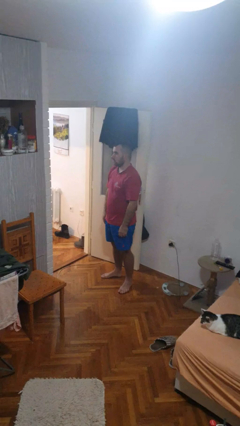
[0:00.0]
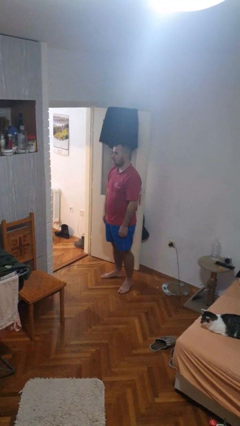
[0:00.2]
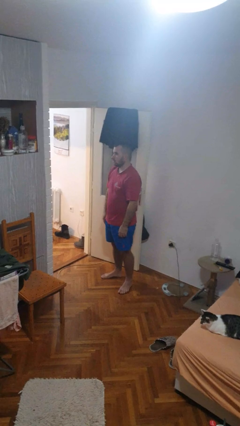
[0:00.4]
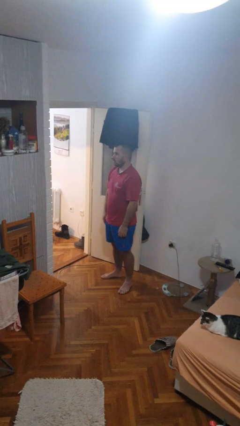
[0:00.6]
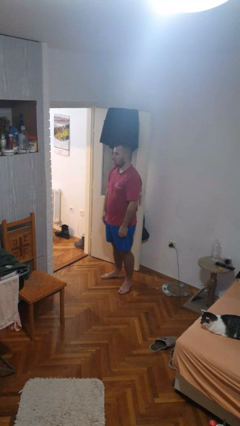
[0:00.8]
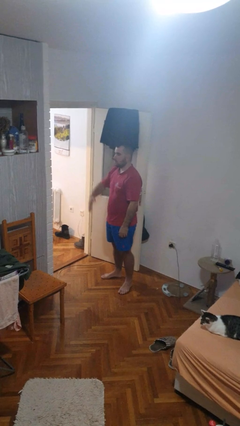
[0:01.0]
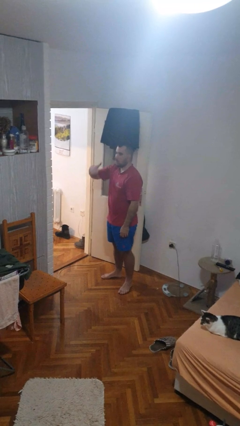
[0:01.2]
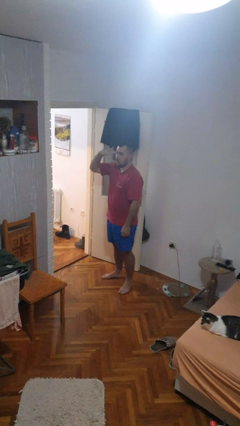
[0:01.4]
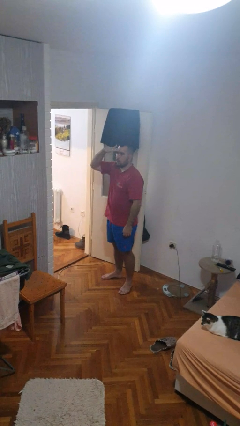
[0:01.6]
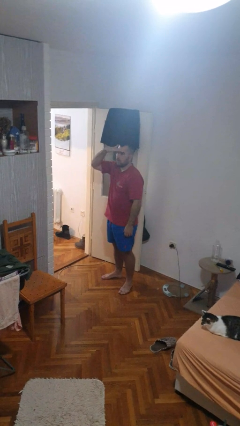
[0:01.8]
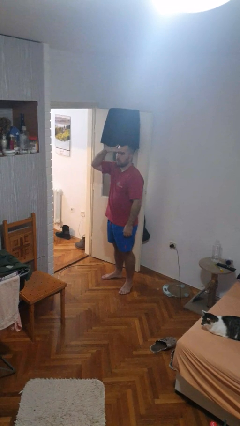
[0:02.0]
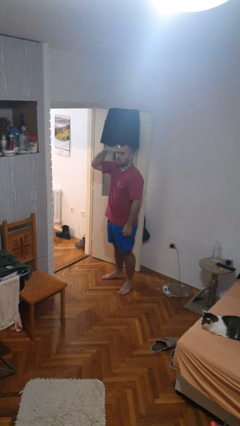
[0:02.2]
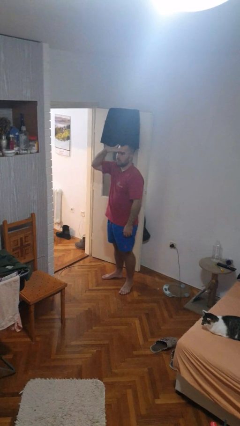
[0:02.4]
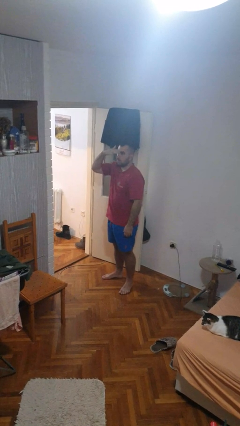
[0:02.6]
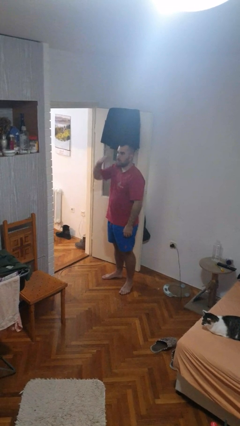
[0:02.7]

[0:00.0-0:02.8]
person shades eyes

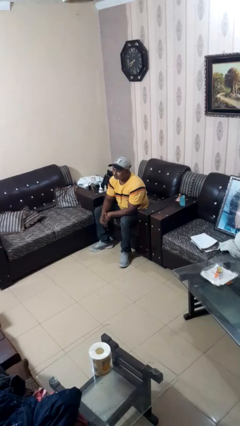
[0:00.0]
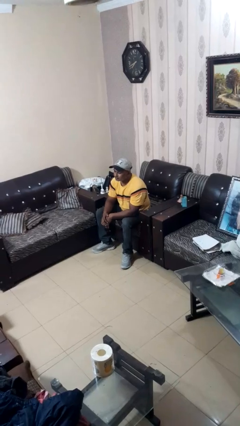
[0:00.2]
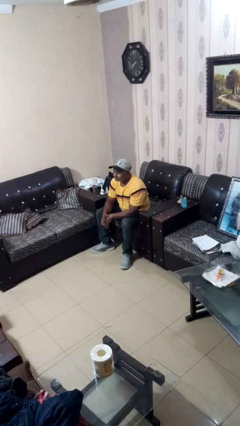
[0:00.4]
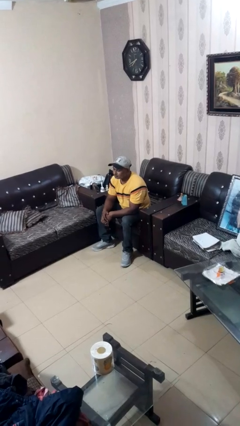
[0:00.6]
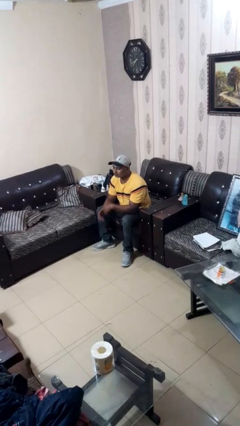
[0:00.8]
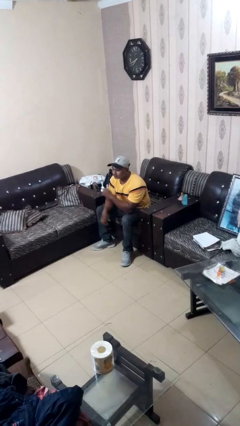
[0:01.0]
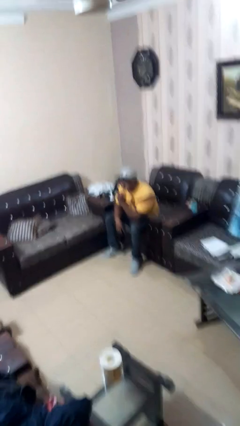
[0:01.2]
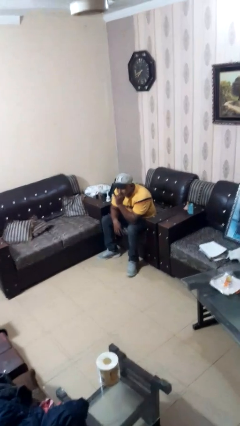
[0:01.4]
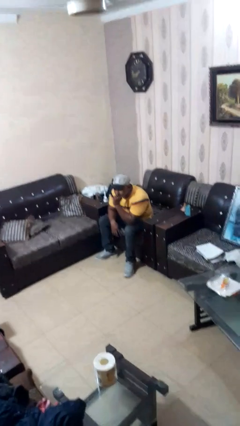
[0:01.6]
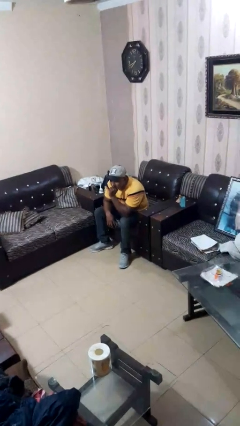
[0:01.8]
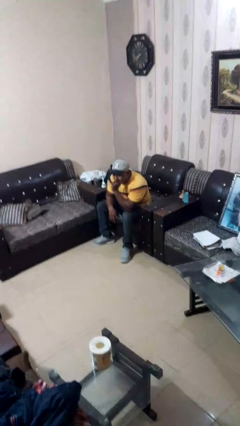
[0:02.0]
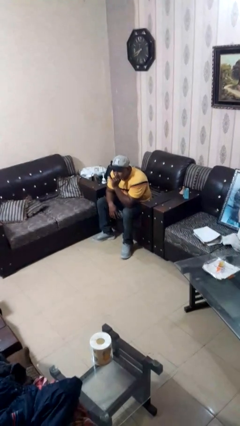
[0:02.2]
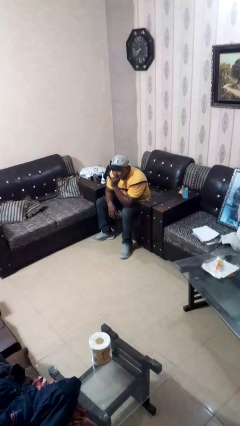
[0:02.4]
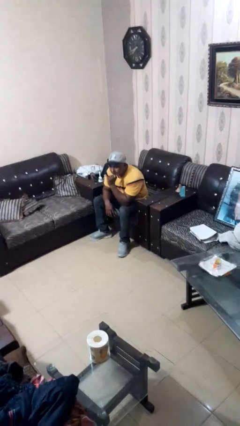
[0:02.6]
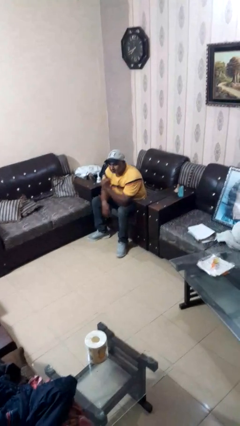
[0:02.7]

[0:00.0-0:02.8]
person strokes chin

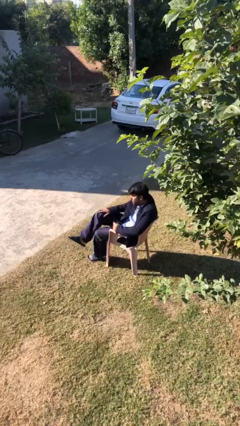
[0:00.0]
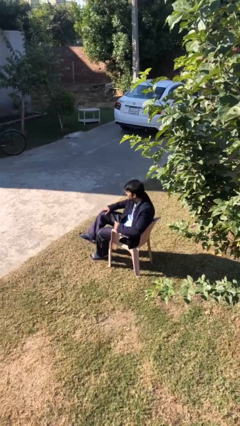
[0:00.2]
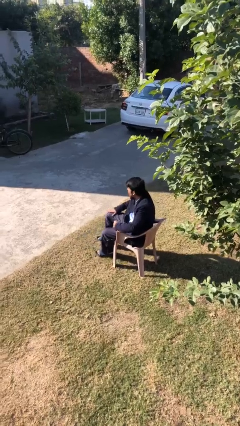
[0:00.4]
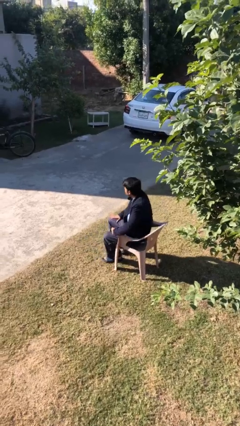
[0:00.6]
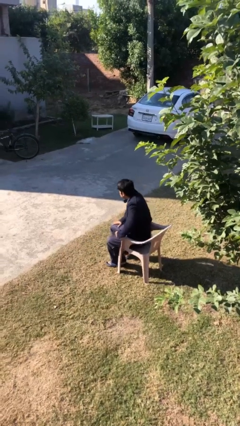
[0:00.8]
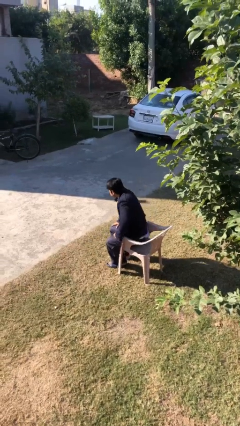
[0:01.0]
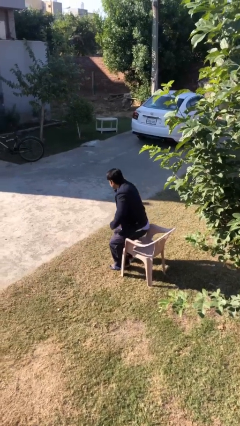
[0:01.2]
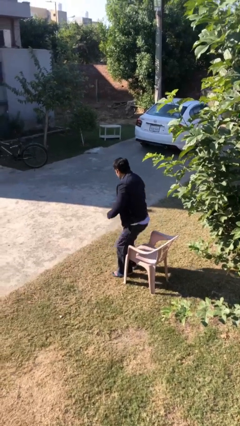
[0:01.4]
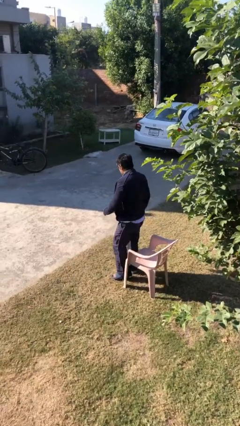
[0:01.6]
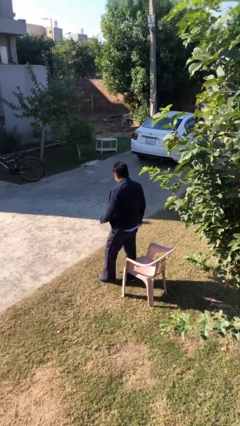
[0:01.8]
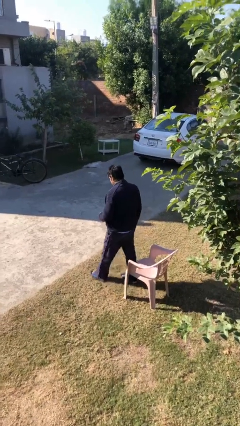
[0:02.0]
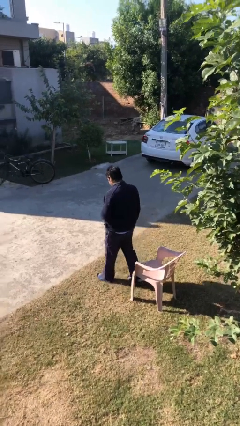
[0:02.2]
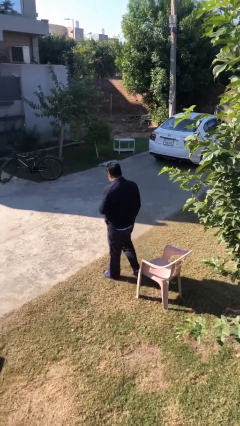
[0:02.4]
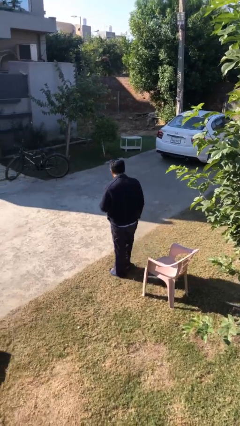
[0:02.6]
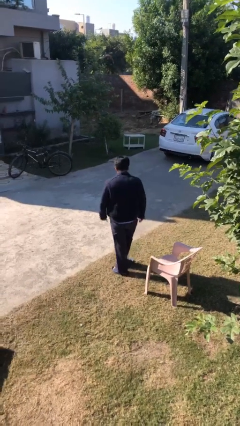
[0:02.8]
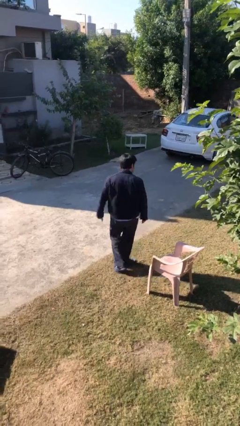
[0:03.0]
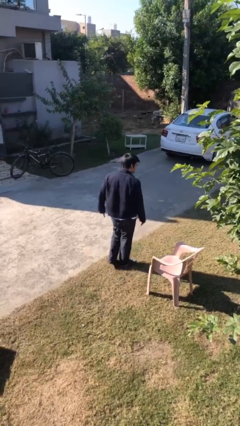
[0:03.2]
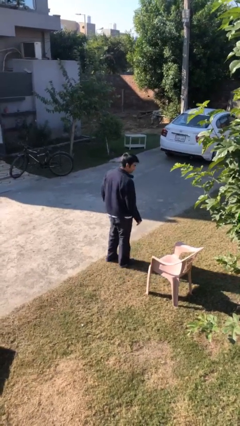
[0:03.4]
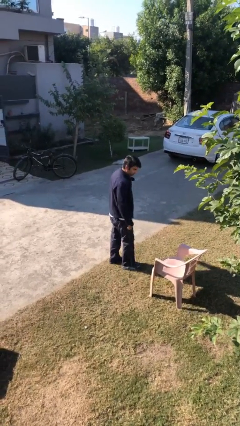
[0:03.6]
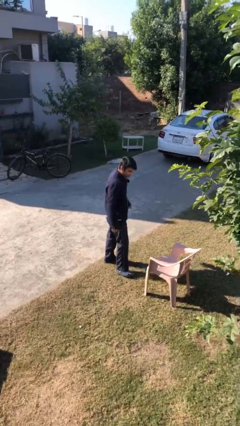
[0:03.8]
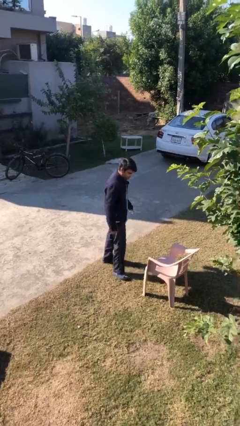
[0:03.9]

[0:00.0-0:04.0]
person stands up

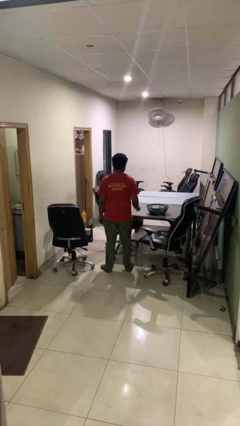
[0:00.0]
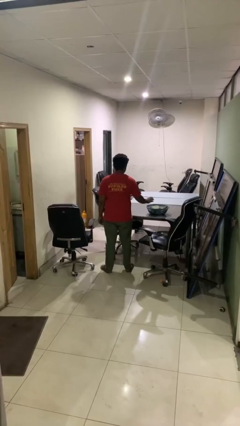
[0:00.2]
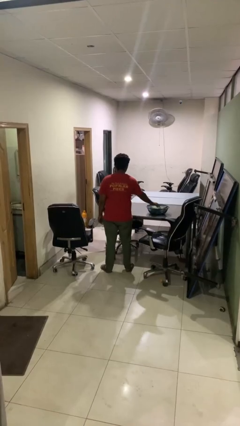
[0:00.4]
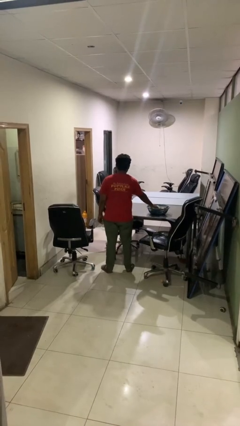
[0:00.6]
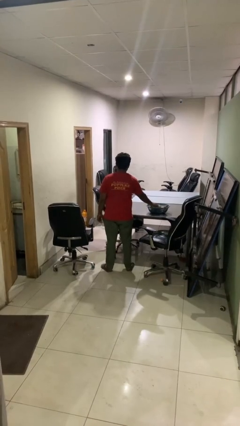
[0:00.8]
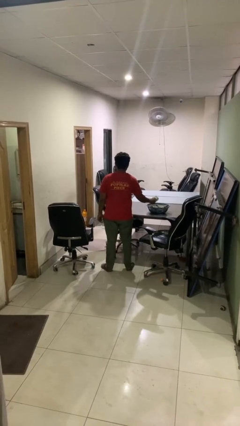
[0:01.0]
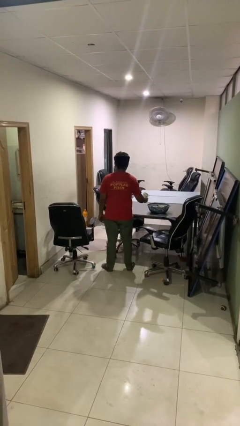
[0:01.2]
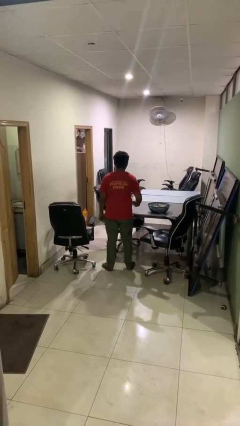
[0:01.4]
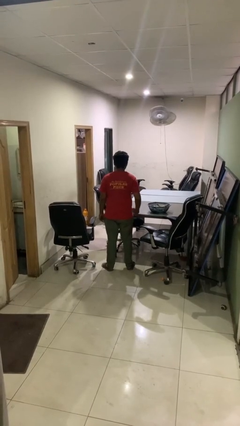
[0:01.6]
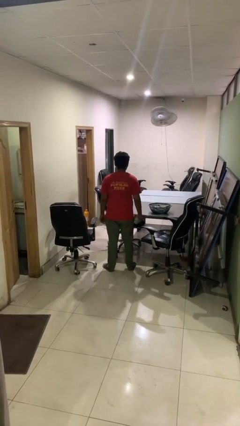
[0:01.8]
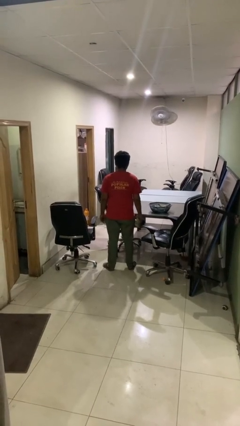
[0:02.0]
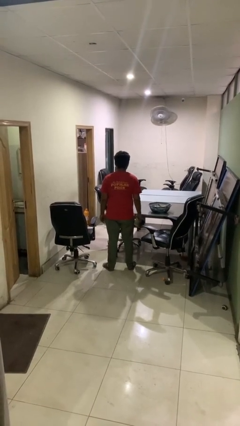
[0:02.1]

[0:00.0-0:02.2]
person takes object from basket

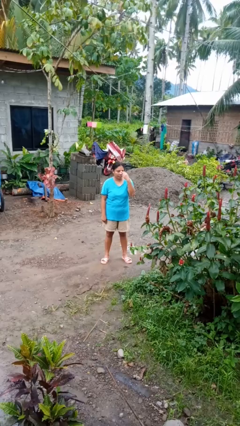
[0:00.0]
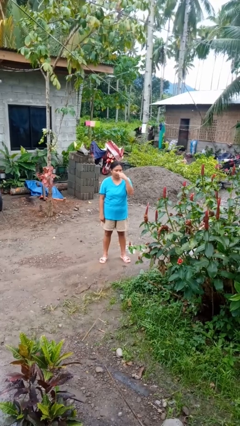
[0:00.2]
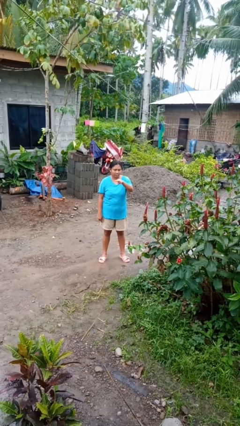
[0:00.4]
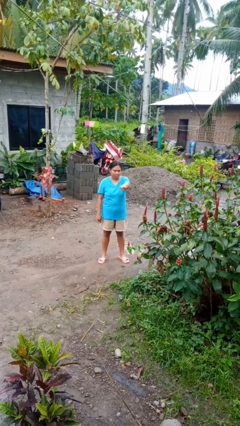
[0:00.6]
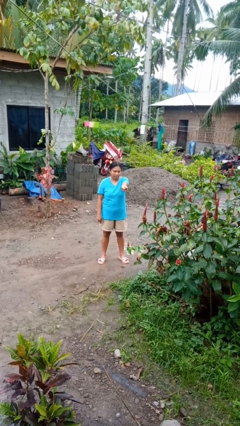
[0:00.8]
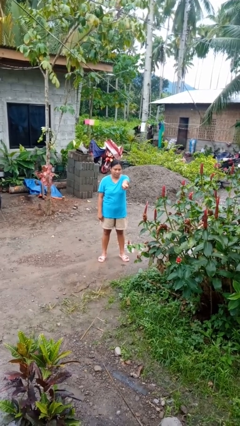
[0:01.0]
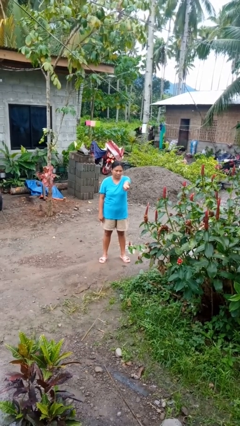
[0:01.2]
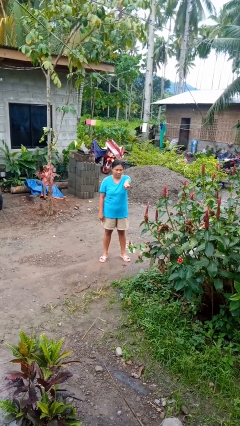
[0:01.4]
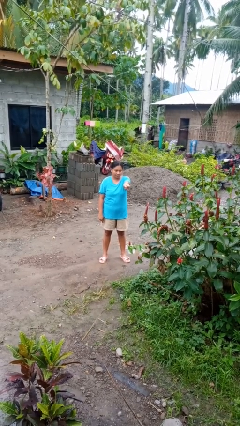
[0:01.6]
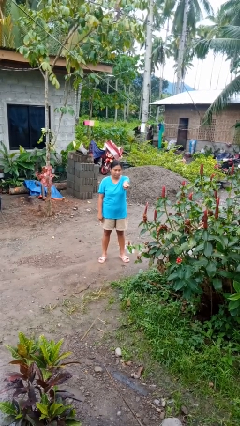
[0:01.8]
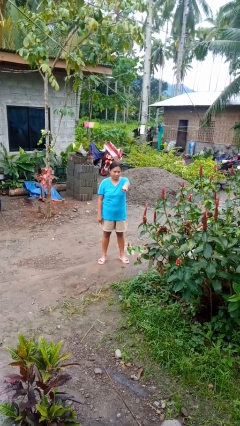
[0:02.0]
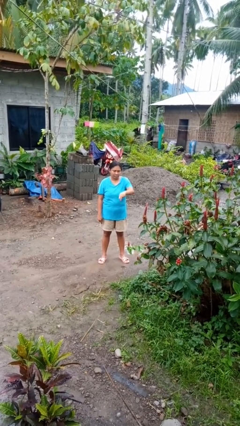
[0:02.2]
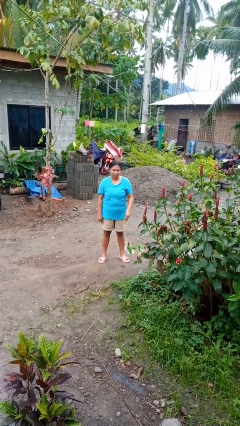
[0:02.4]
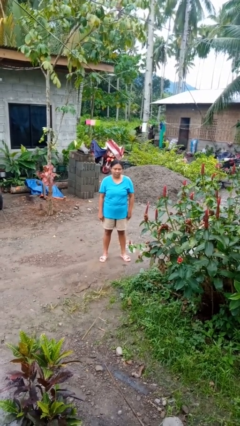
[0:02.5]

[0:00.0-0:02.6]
person gestures watch closely

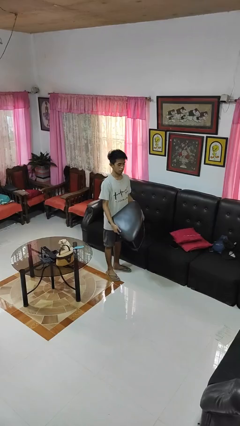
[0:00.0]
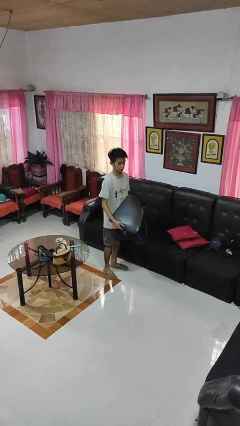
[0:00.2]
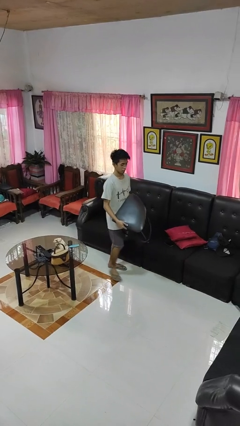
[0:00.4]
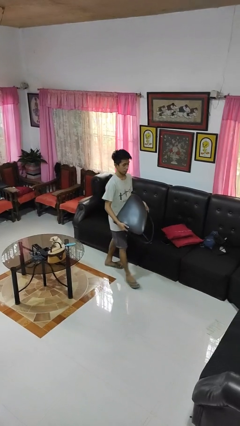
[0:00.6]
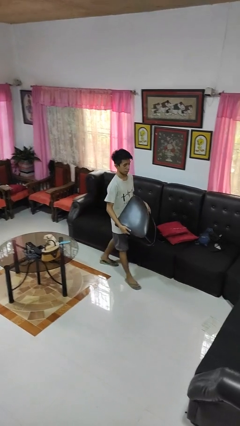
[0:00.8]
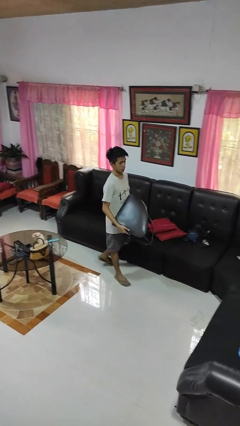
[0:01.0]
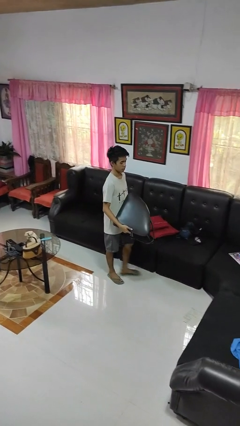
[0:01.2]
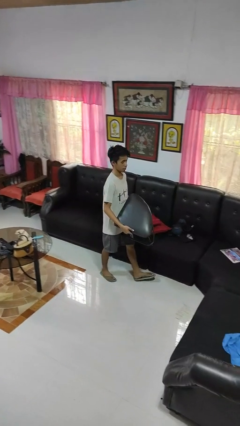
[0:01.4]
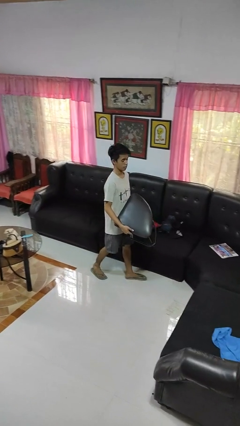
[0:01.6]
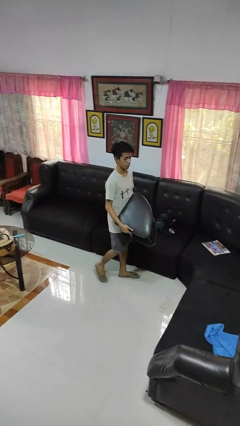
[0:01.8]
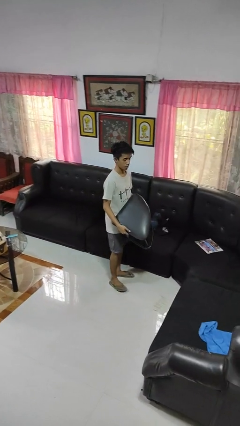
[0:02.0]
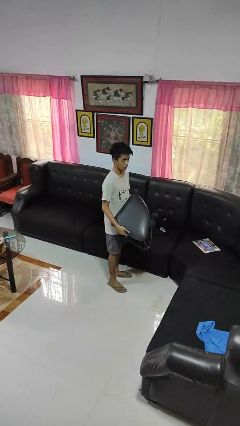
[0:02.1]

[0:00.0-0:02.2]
person carries furniture

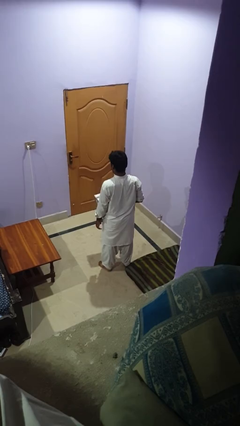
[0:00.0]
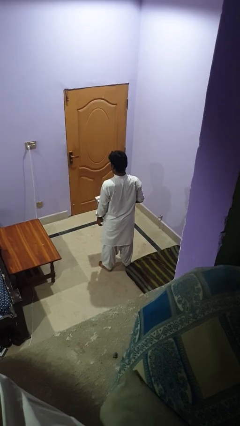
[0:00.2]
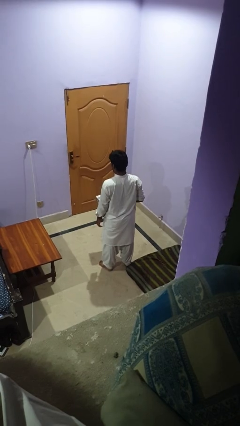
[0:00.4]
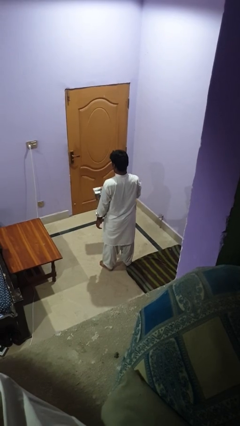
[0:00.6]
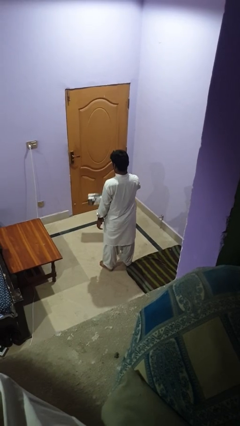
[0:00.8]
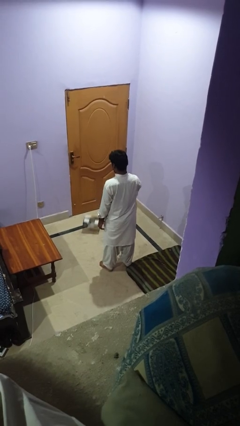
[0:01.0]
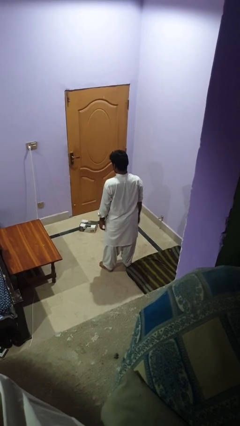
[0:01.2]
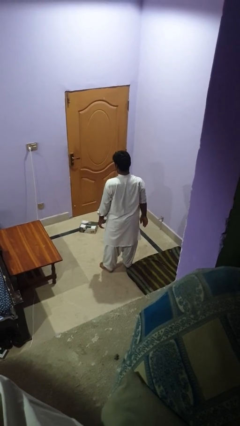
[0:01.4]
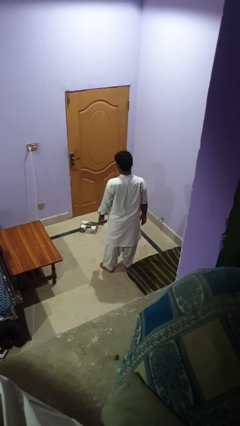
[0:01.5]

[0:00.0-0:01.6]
person throws object to ground
